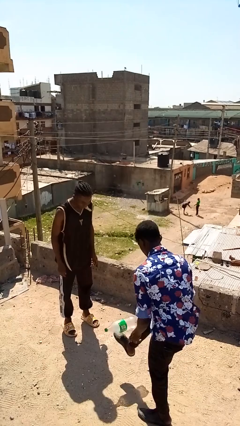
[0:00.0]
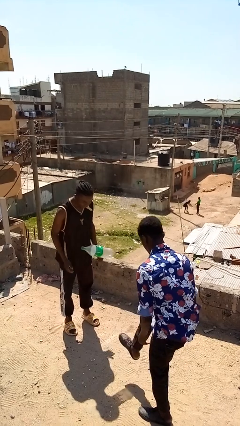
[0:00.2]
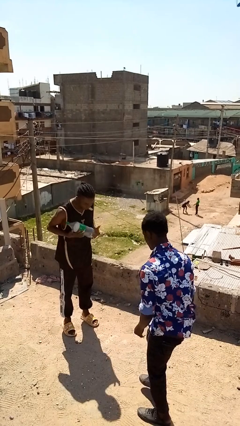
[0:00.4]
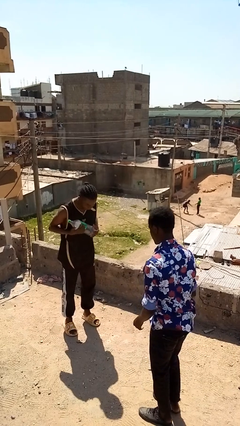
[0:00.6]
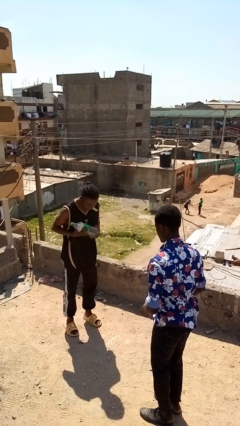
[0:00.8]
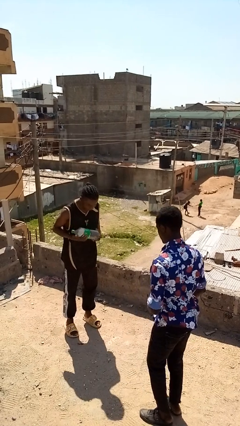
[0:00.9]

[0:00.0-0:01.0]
person kicks object to person

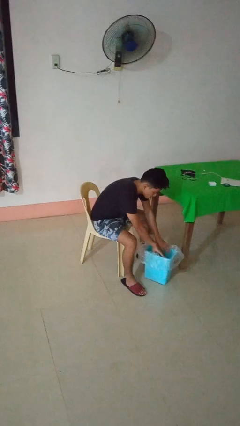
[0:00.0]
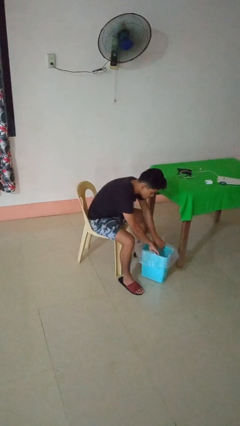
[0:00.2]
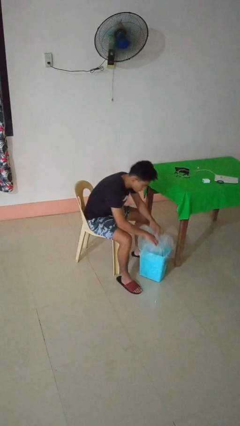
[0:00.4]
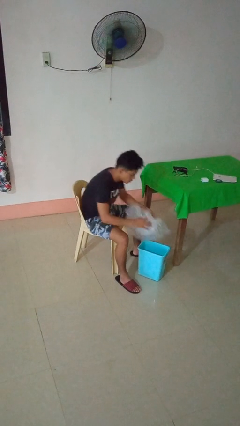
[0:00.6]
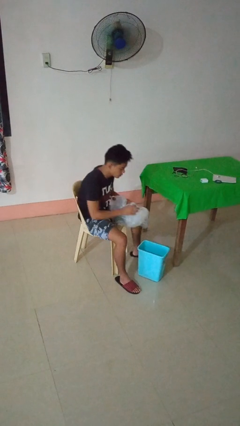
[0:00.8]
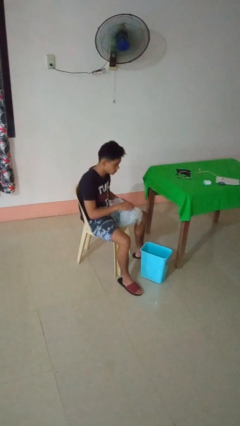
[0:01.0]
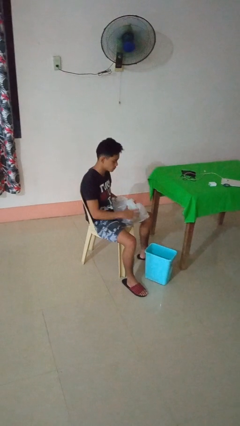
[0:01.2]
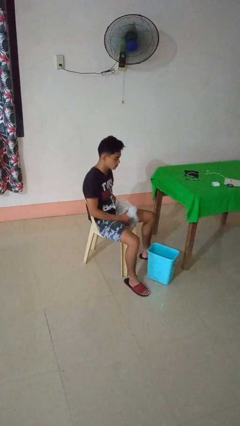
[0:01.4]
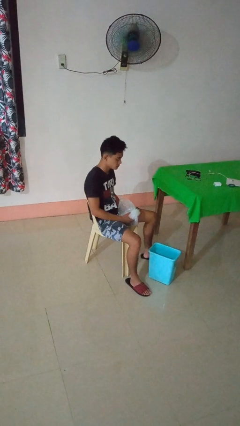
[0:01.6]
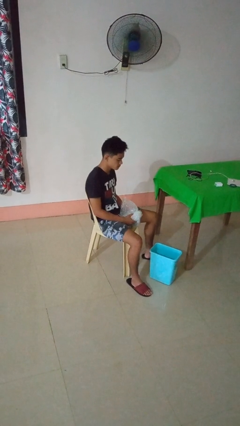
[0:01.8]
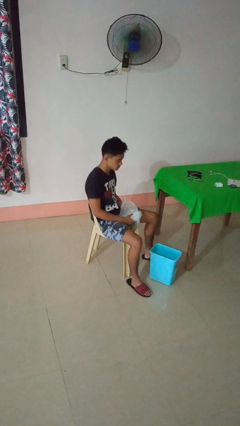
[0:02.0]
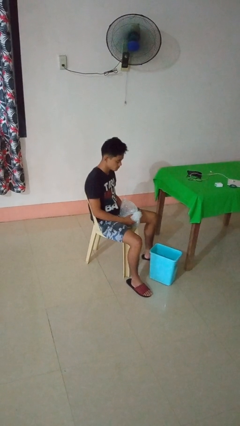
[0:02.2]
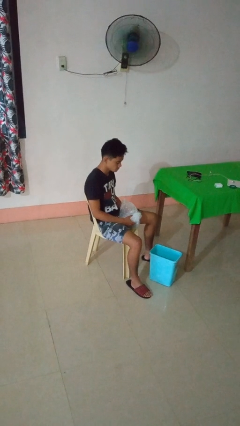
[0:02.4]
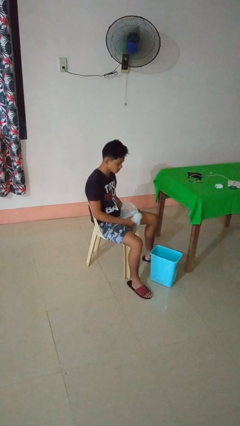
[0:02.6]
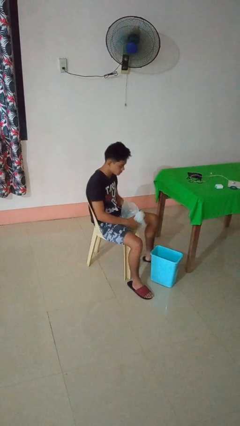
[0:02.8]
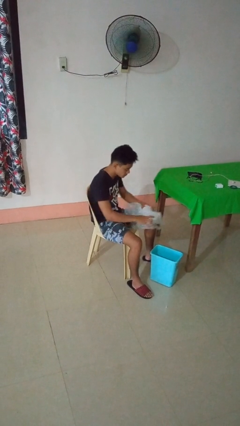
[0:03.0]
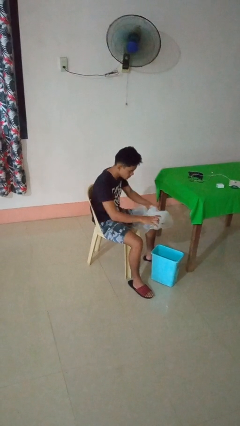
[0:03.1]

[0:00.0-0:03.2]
person removes trashbag from trashcan

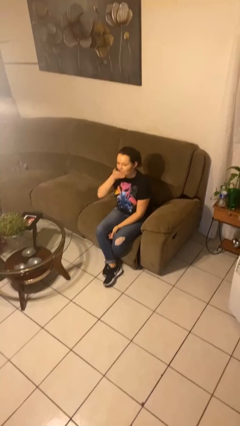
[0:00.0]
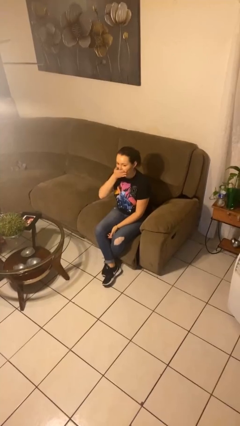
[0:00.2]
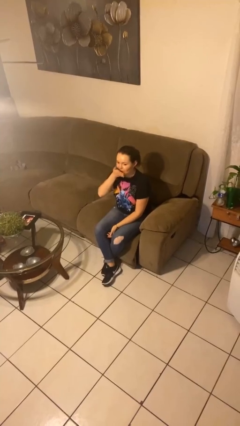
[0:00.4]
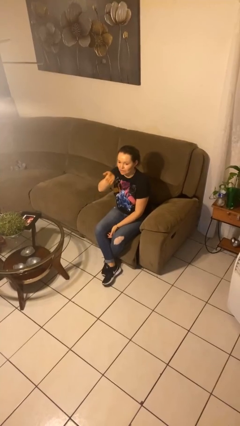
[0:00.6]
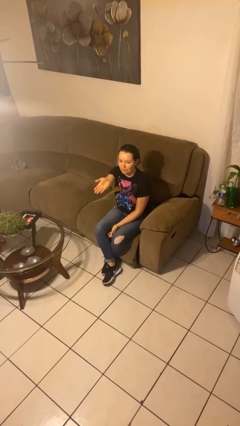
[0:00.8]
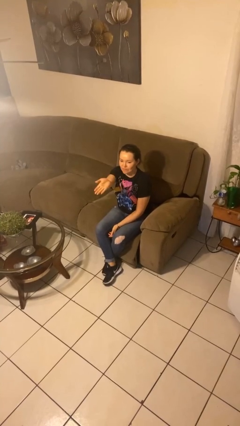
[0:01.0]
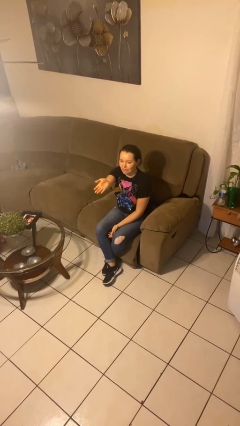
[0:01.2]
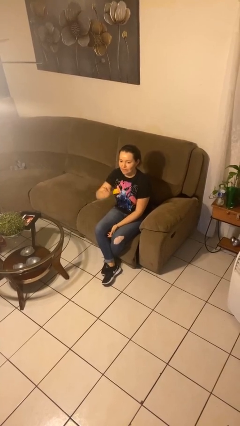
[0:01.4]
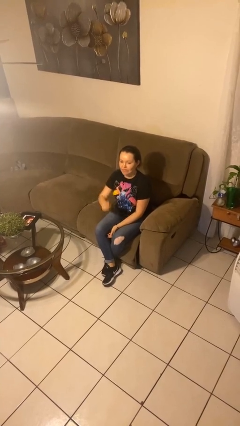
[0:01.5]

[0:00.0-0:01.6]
person gestures blow kiss

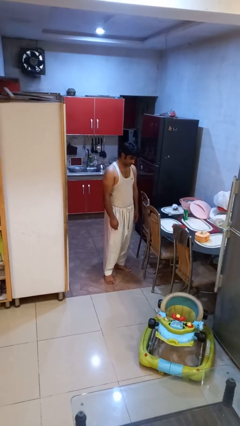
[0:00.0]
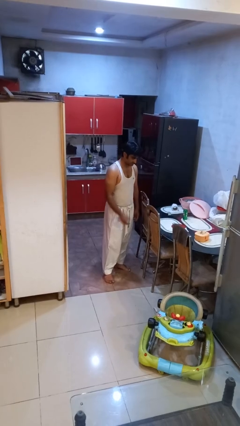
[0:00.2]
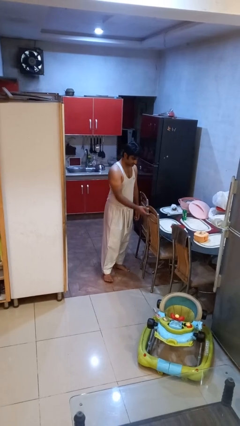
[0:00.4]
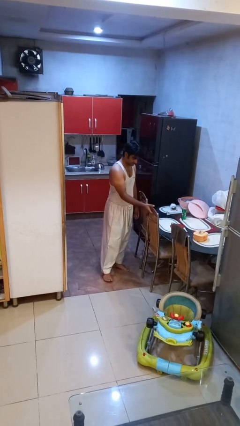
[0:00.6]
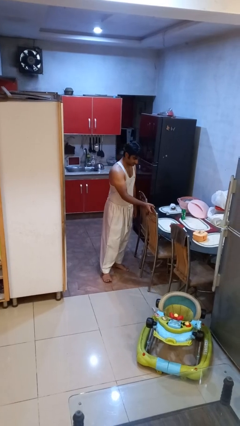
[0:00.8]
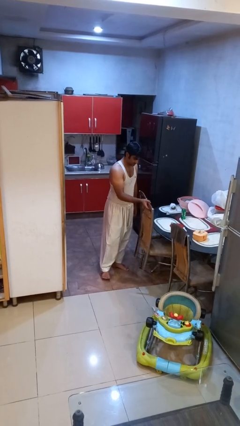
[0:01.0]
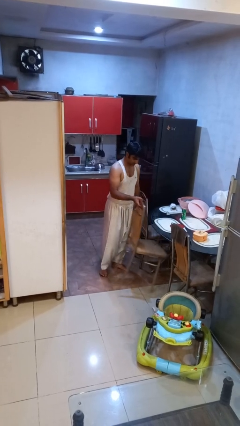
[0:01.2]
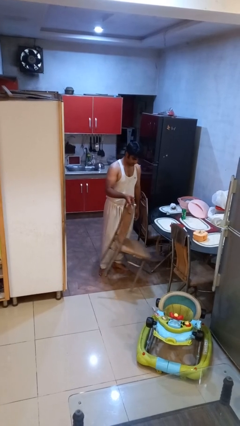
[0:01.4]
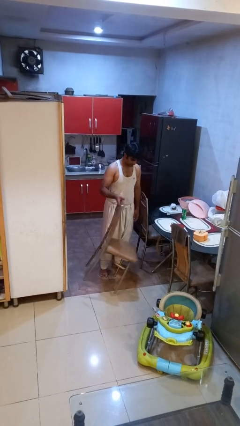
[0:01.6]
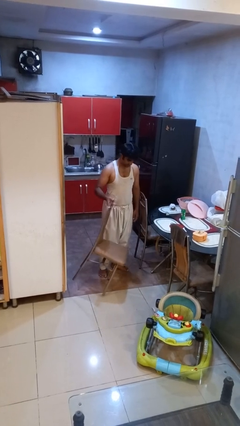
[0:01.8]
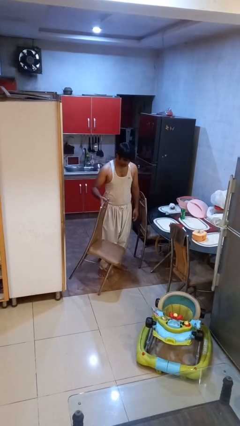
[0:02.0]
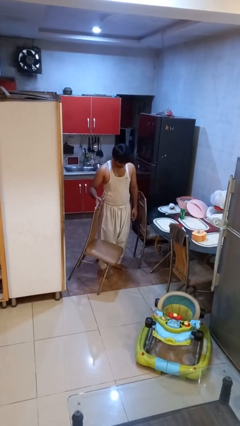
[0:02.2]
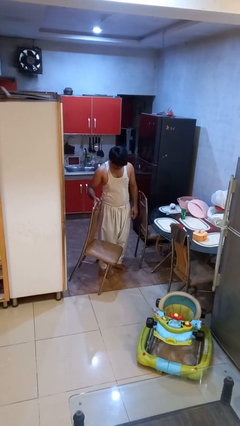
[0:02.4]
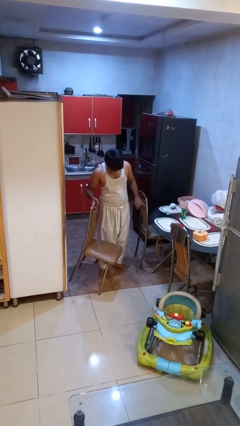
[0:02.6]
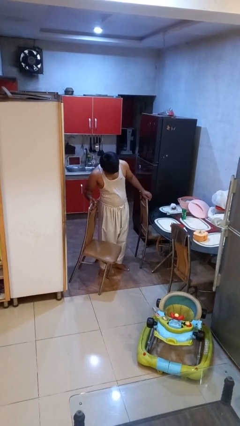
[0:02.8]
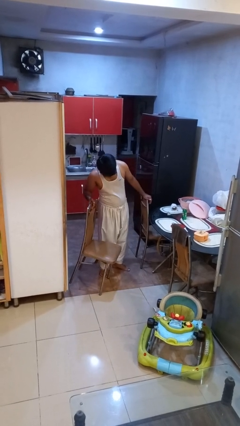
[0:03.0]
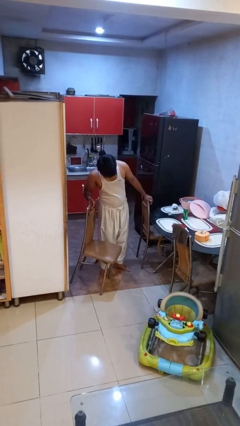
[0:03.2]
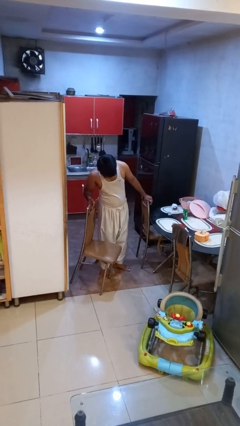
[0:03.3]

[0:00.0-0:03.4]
person pulls out chair

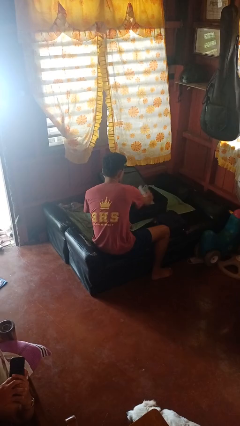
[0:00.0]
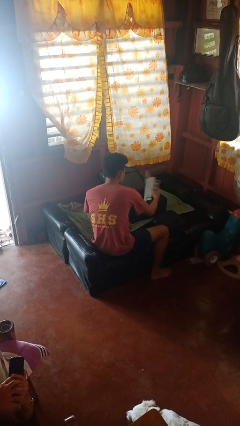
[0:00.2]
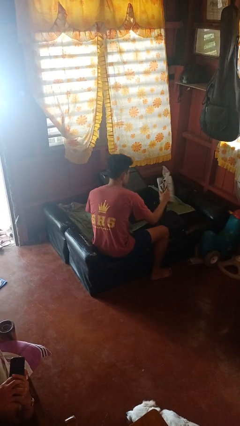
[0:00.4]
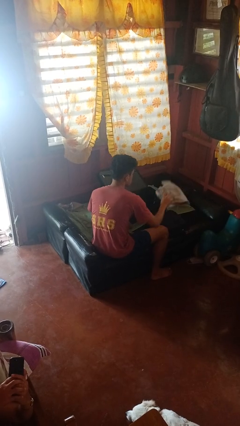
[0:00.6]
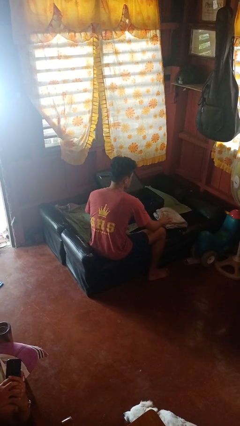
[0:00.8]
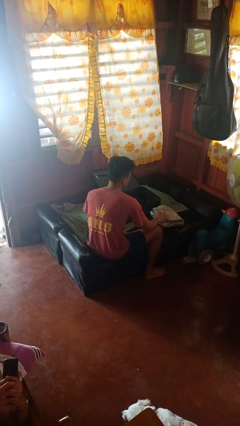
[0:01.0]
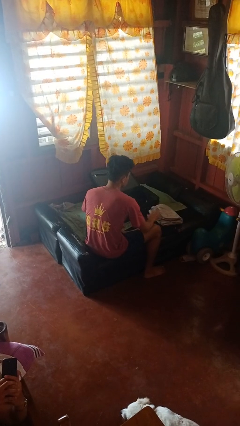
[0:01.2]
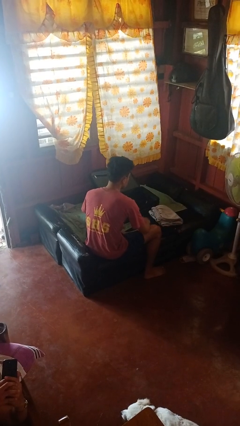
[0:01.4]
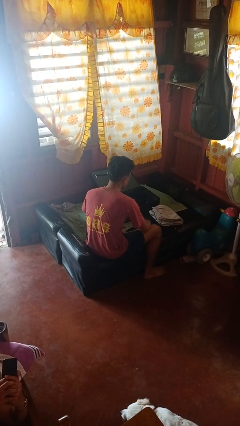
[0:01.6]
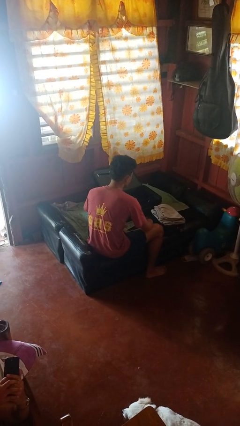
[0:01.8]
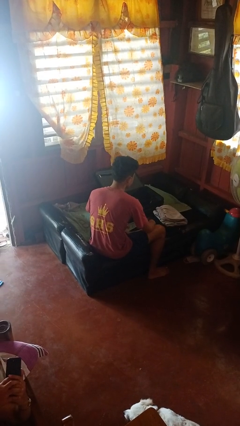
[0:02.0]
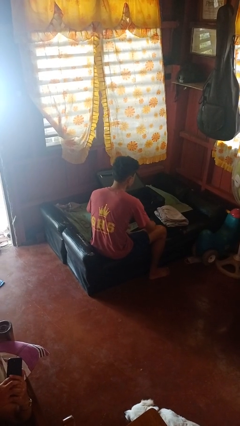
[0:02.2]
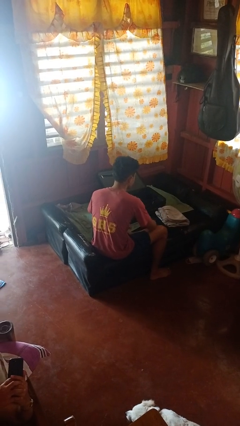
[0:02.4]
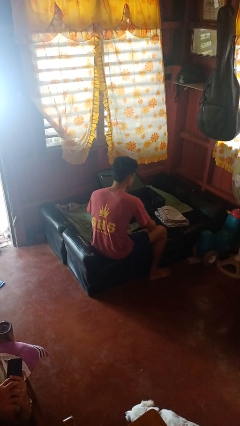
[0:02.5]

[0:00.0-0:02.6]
person unloads clothes from suitcase

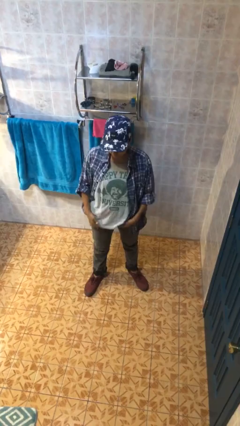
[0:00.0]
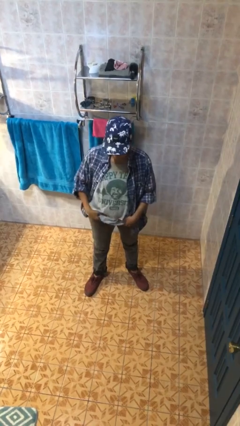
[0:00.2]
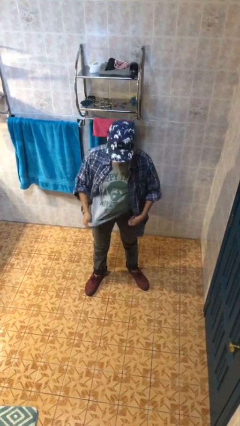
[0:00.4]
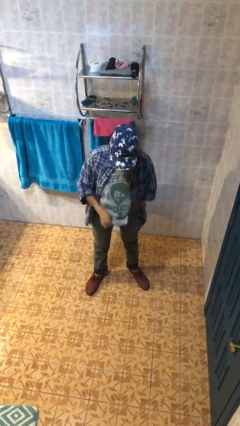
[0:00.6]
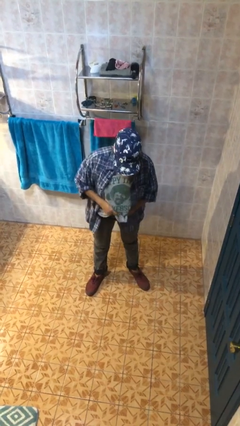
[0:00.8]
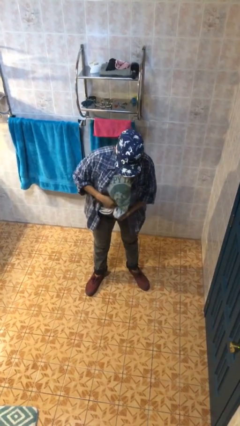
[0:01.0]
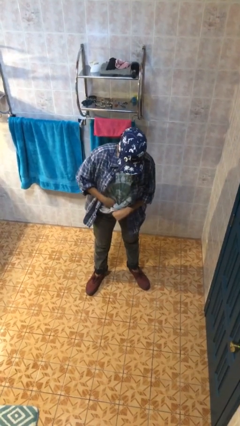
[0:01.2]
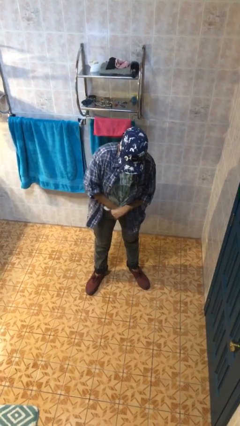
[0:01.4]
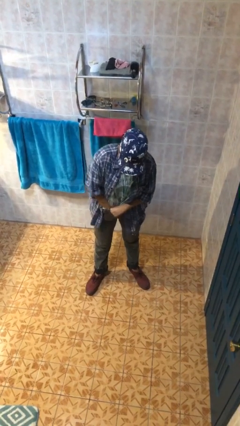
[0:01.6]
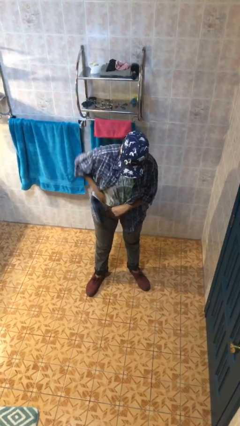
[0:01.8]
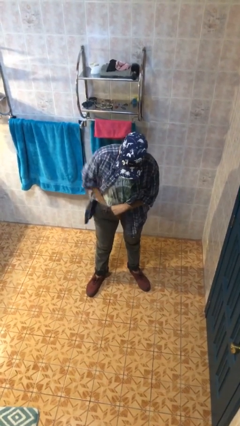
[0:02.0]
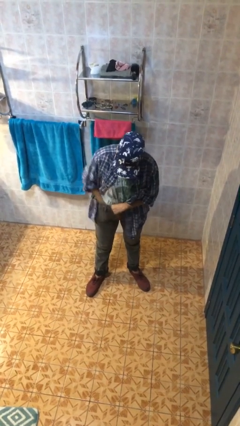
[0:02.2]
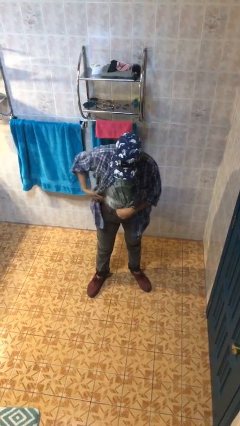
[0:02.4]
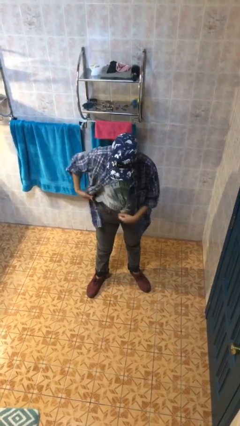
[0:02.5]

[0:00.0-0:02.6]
person tucks in shirt

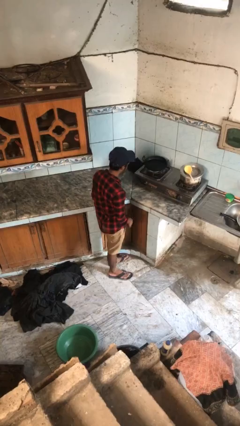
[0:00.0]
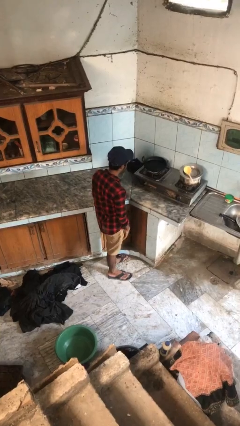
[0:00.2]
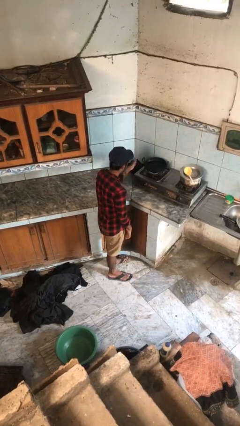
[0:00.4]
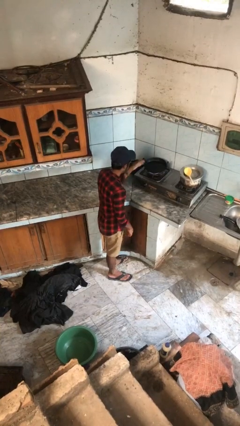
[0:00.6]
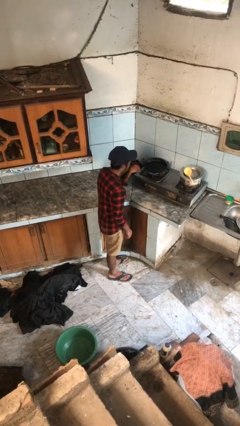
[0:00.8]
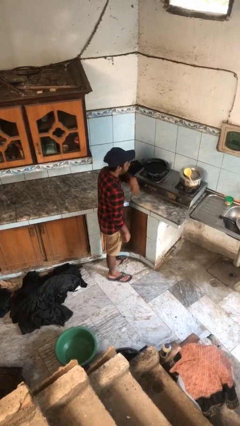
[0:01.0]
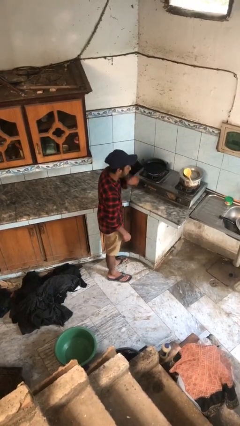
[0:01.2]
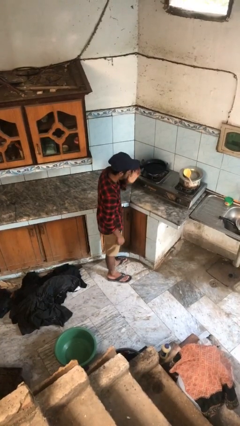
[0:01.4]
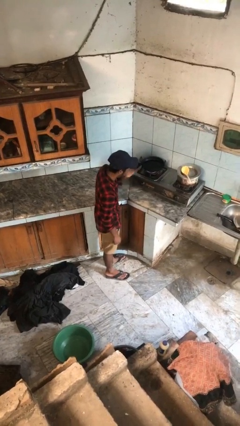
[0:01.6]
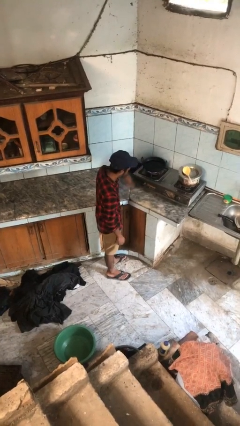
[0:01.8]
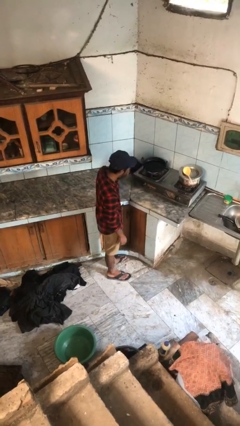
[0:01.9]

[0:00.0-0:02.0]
person burns hand

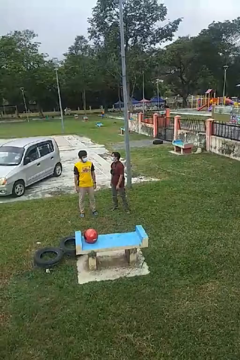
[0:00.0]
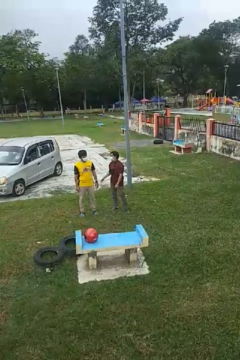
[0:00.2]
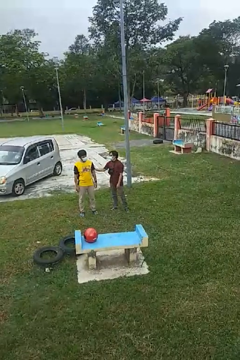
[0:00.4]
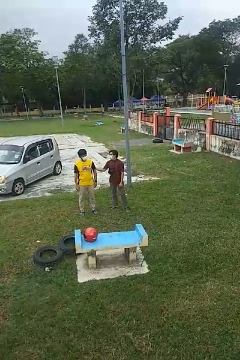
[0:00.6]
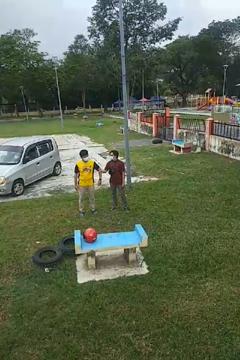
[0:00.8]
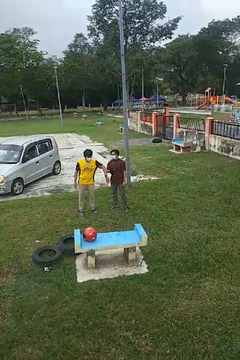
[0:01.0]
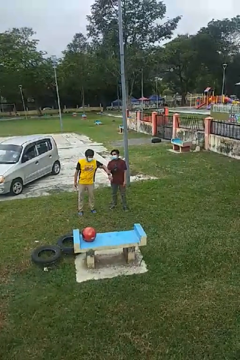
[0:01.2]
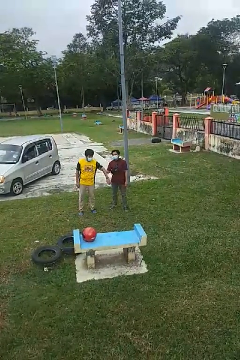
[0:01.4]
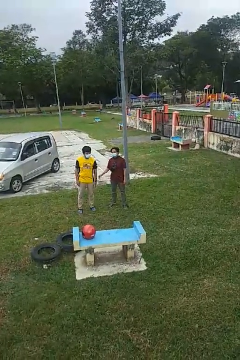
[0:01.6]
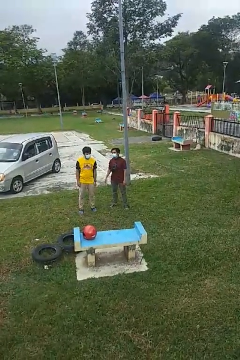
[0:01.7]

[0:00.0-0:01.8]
person grabs person by bicep
